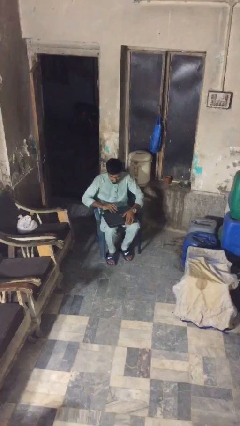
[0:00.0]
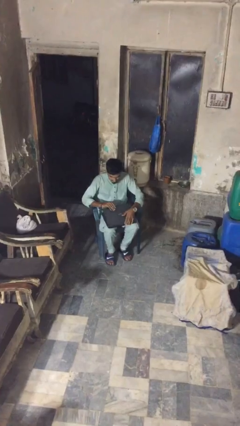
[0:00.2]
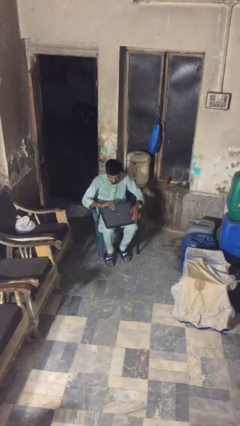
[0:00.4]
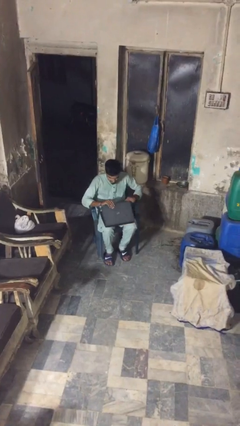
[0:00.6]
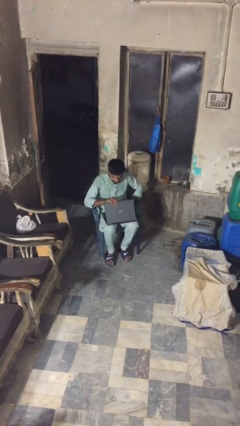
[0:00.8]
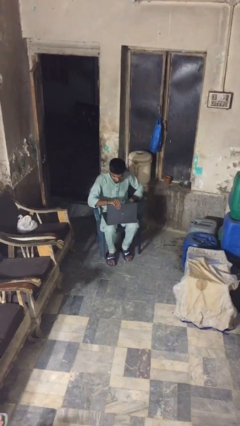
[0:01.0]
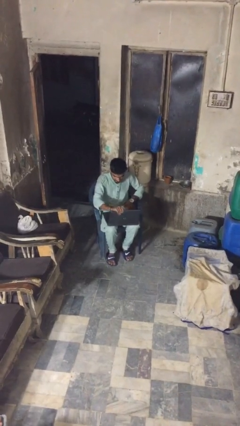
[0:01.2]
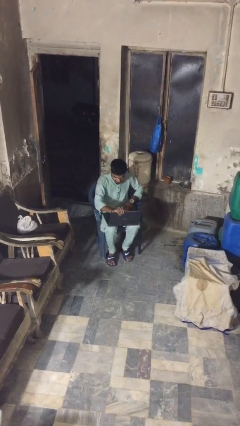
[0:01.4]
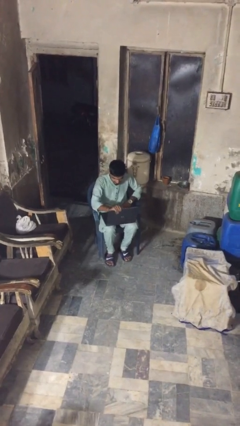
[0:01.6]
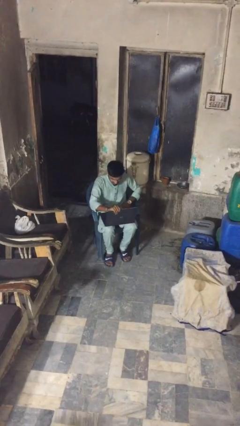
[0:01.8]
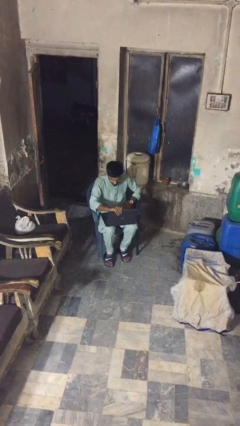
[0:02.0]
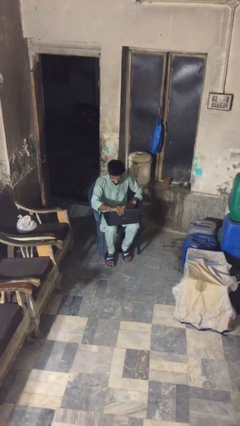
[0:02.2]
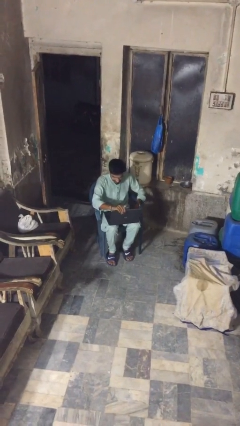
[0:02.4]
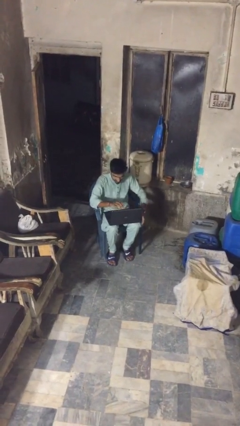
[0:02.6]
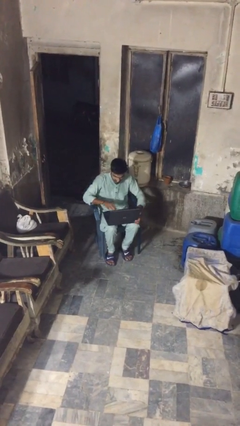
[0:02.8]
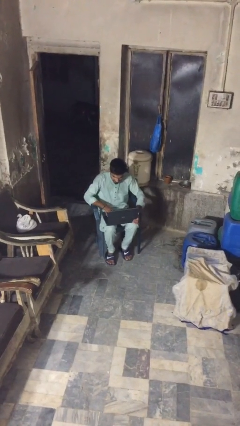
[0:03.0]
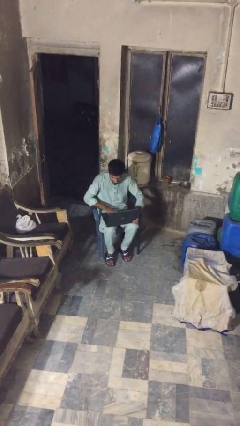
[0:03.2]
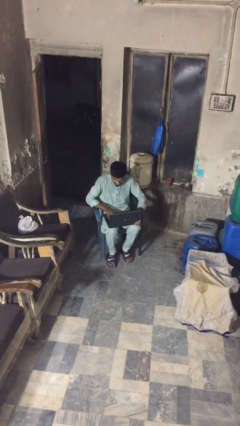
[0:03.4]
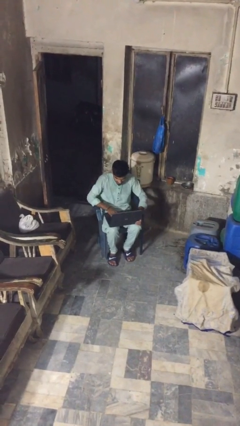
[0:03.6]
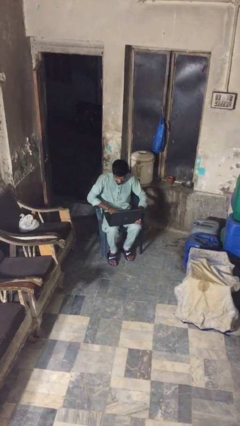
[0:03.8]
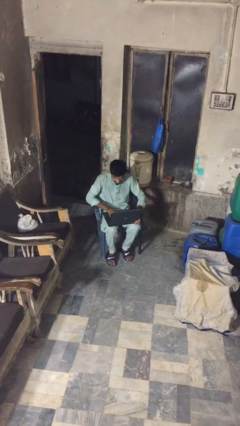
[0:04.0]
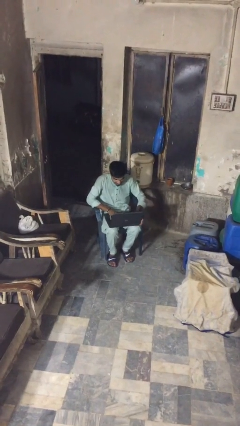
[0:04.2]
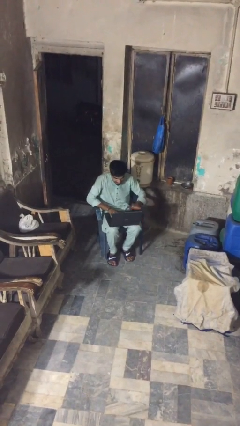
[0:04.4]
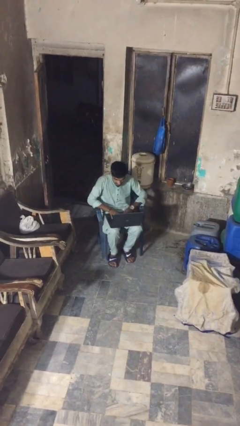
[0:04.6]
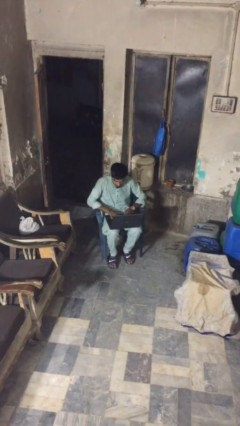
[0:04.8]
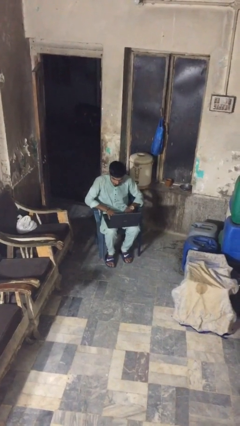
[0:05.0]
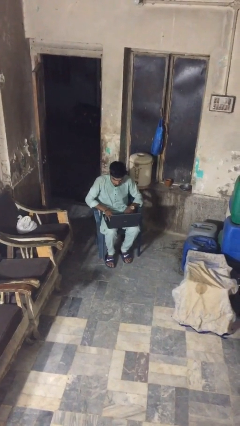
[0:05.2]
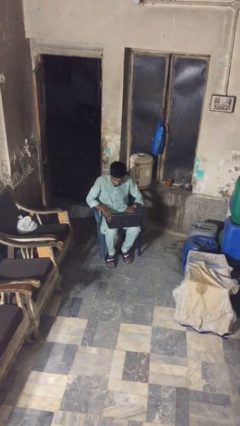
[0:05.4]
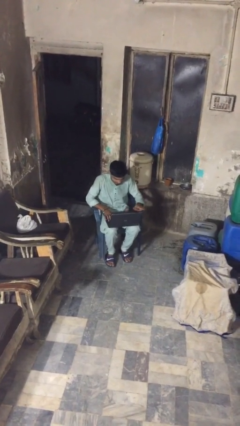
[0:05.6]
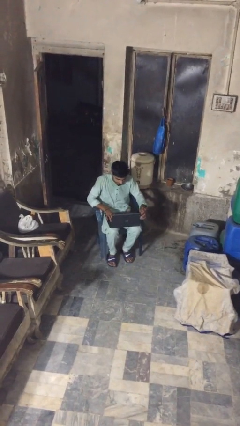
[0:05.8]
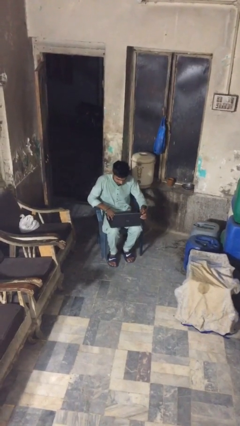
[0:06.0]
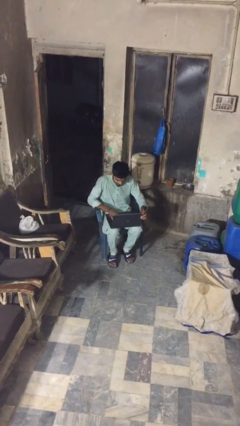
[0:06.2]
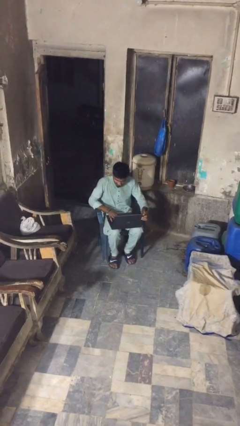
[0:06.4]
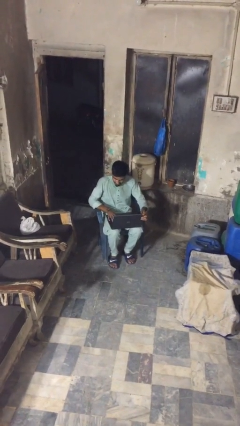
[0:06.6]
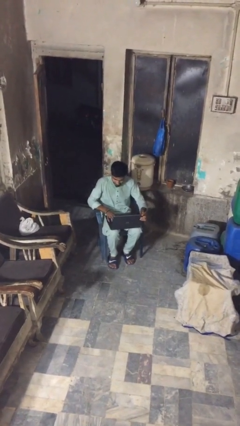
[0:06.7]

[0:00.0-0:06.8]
person interacts with laptop

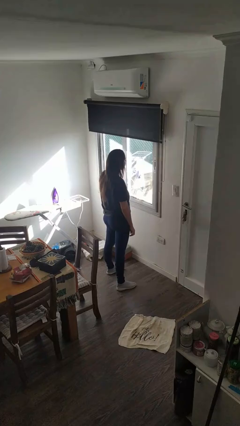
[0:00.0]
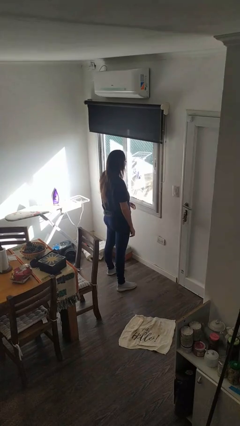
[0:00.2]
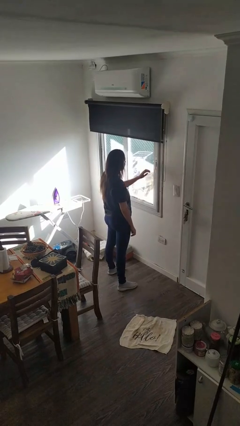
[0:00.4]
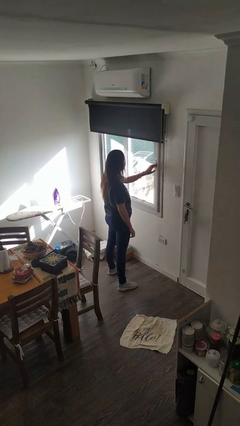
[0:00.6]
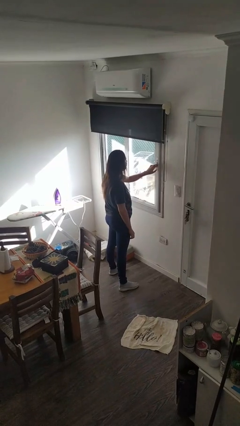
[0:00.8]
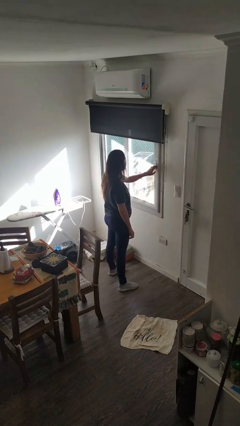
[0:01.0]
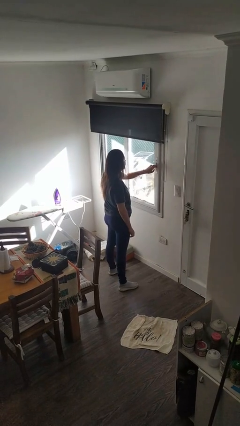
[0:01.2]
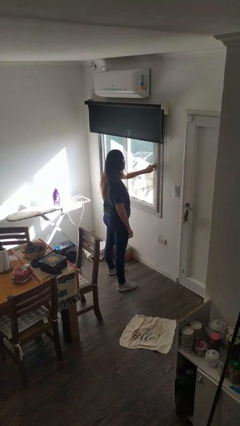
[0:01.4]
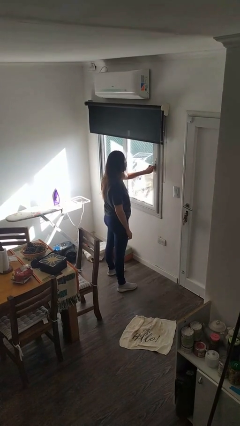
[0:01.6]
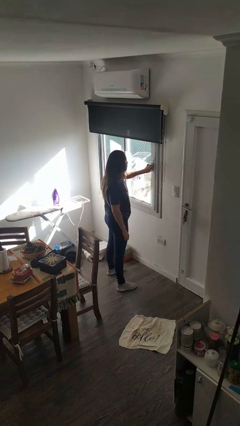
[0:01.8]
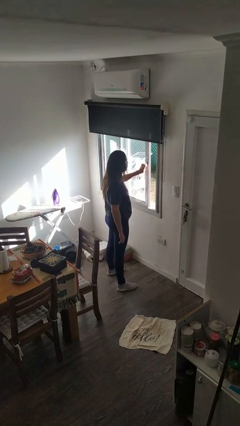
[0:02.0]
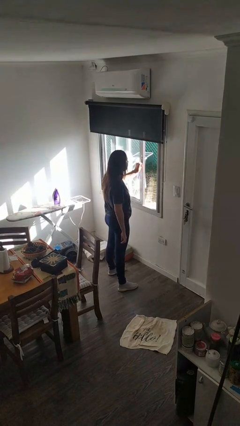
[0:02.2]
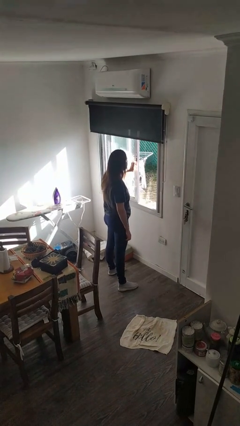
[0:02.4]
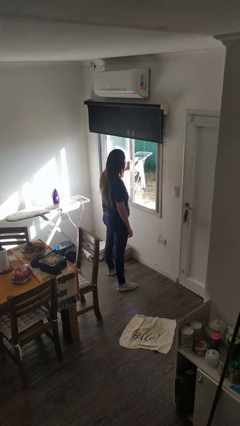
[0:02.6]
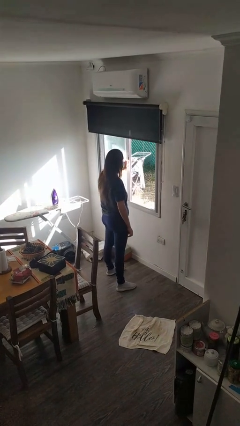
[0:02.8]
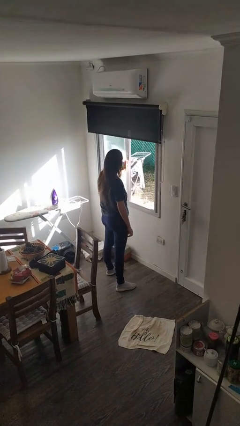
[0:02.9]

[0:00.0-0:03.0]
person opens home window

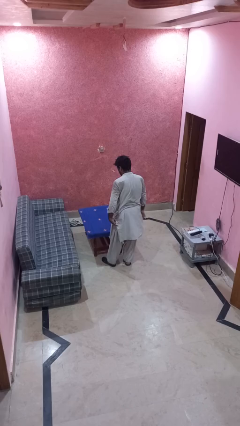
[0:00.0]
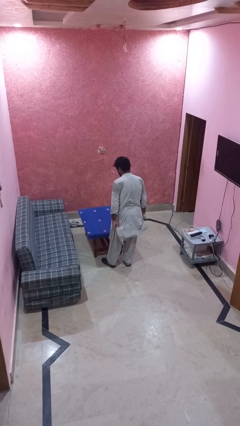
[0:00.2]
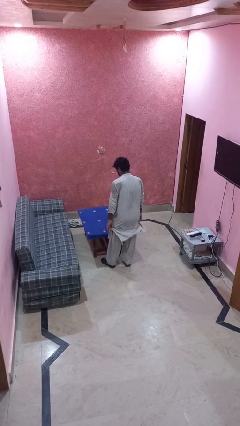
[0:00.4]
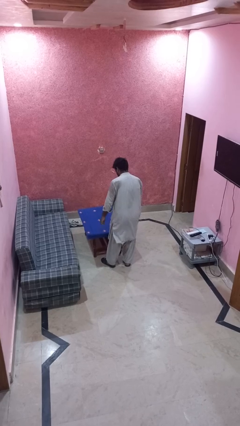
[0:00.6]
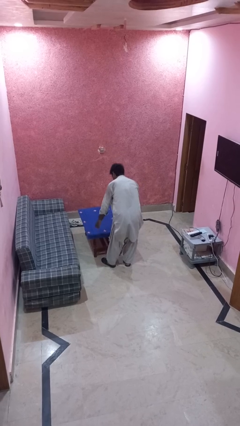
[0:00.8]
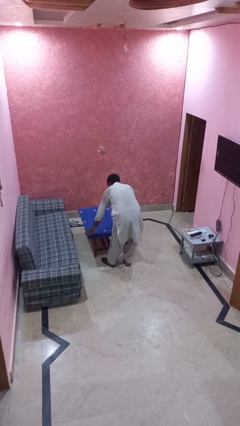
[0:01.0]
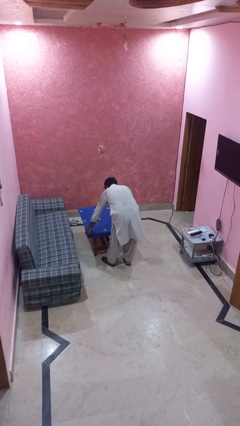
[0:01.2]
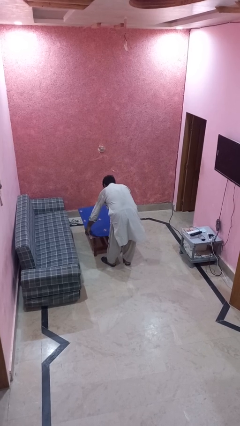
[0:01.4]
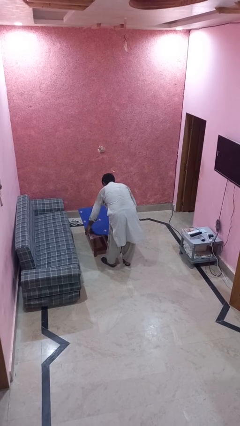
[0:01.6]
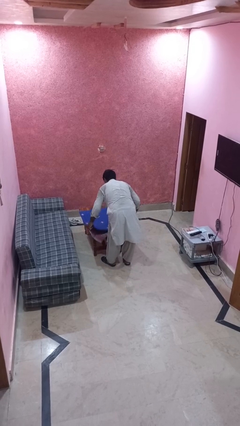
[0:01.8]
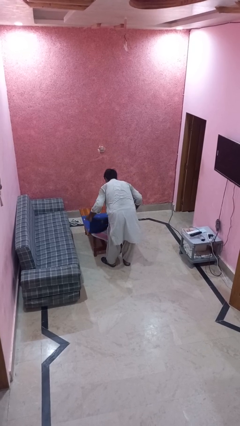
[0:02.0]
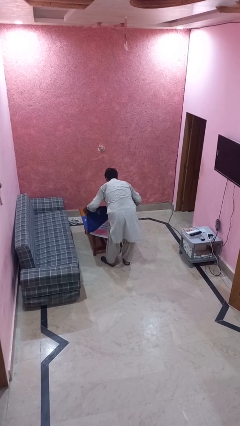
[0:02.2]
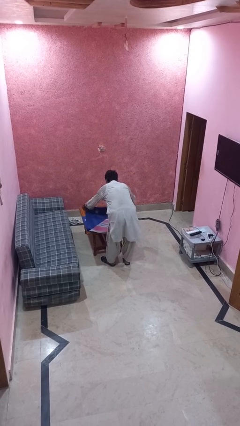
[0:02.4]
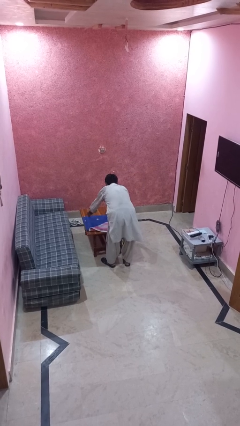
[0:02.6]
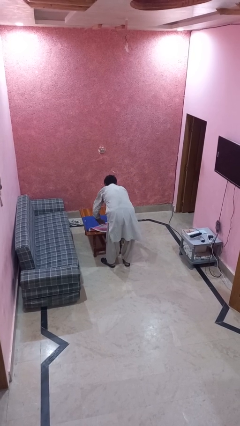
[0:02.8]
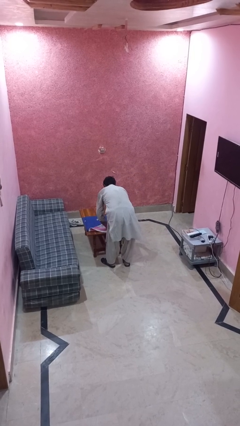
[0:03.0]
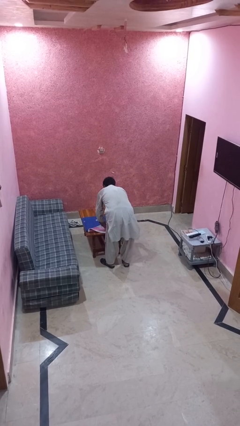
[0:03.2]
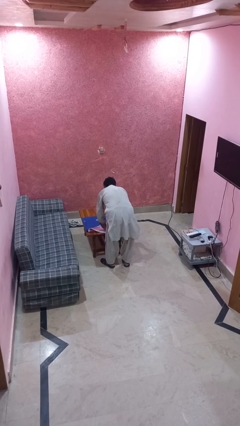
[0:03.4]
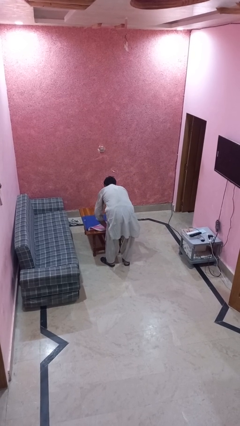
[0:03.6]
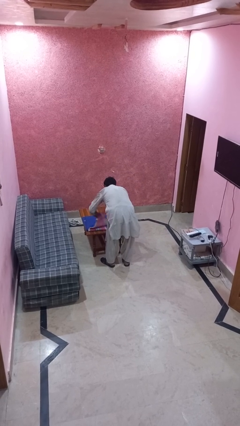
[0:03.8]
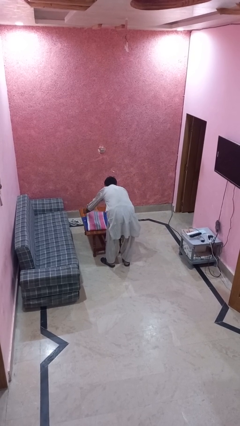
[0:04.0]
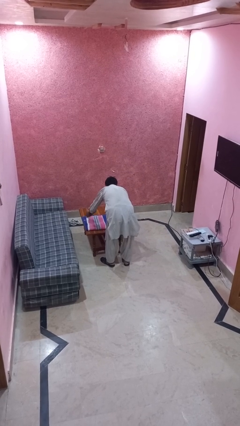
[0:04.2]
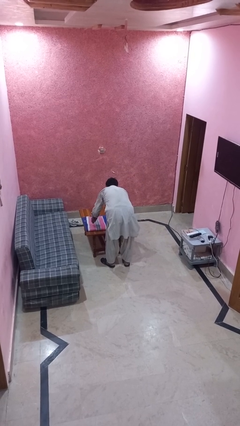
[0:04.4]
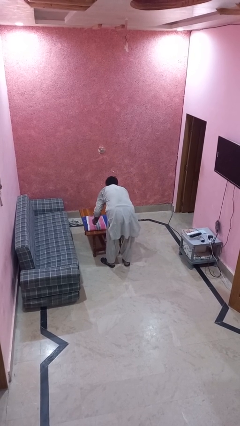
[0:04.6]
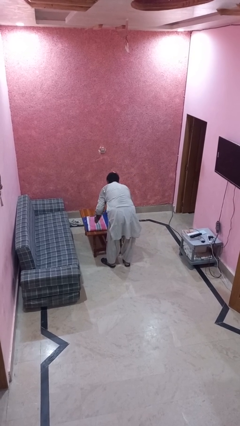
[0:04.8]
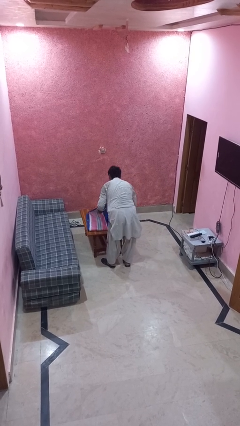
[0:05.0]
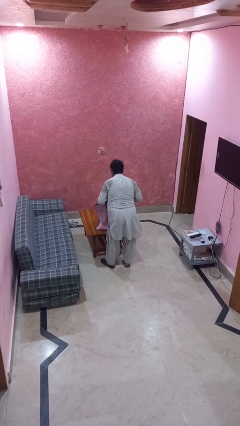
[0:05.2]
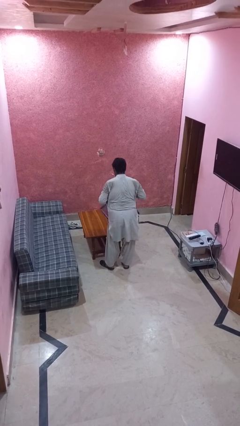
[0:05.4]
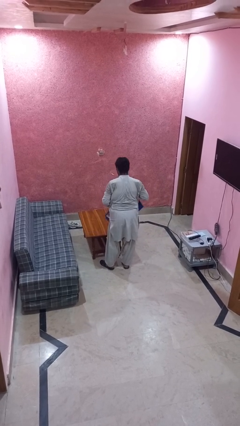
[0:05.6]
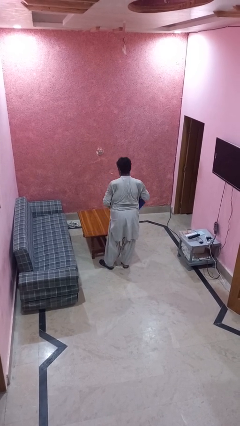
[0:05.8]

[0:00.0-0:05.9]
person folds tablecloth

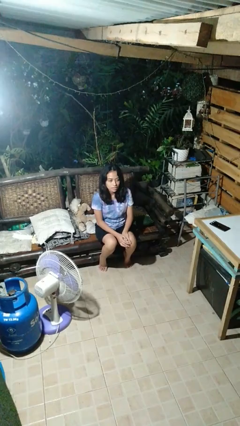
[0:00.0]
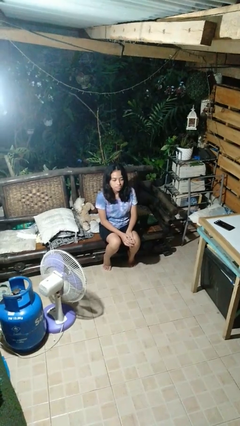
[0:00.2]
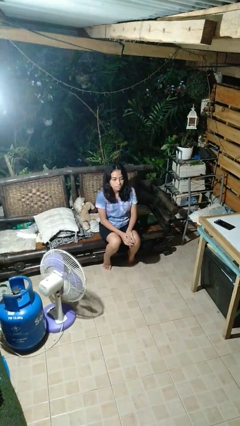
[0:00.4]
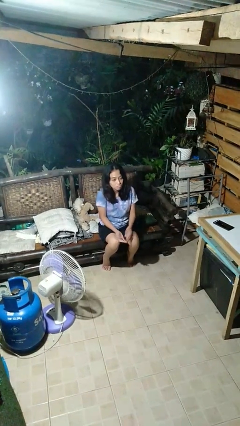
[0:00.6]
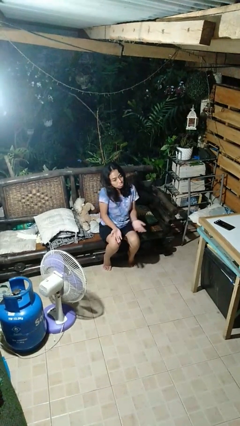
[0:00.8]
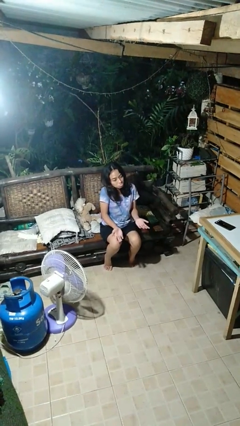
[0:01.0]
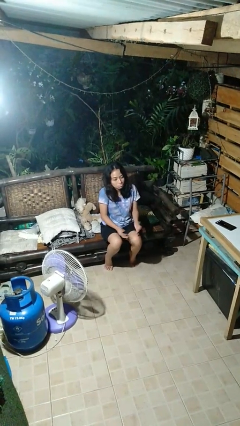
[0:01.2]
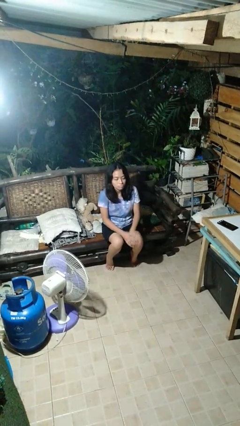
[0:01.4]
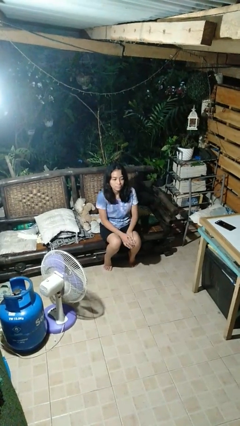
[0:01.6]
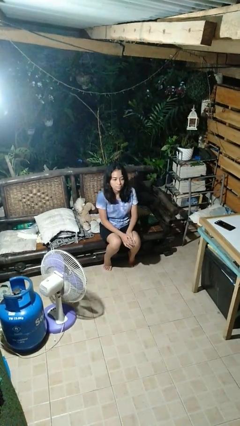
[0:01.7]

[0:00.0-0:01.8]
person shrugs

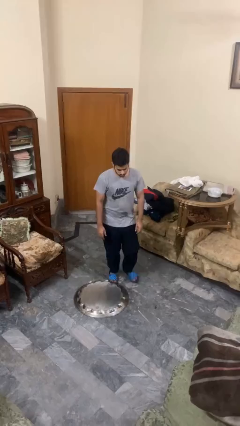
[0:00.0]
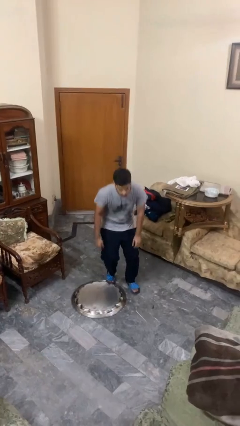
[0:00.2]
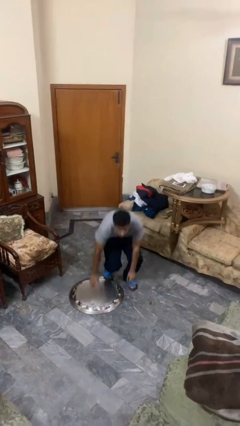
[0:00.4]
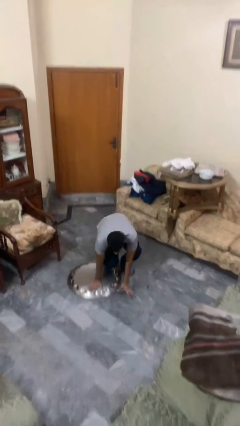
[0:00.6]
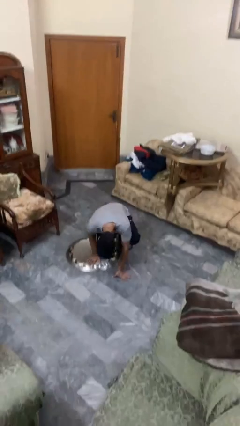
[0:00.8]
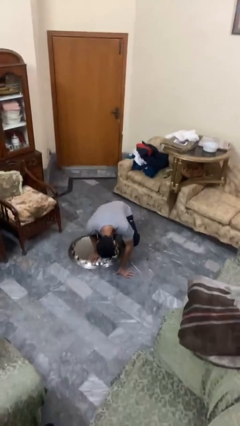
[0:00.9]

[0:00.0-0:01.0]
person trips on object on floor
